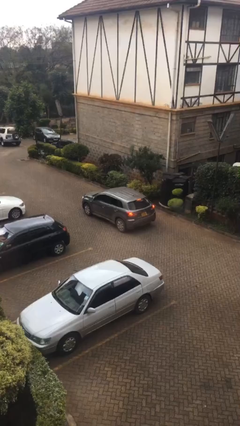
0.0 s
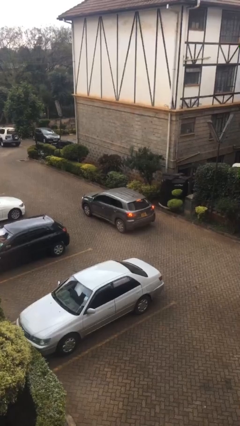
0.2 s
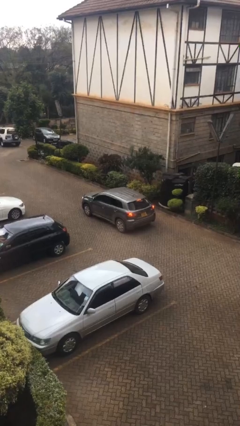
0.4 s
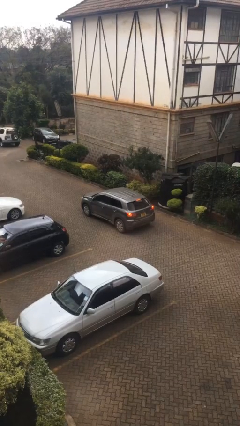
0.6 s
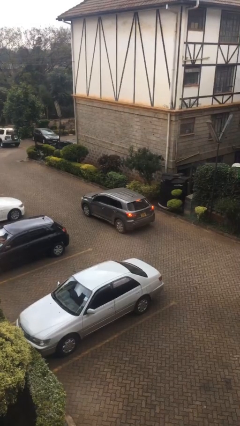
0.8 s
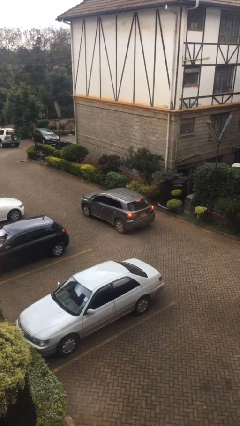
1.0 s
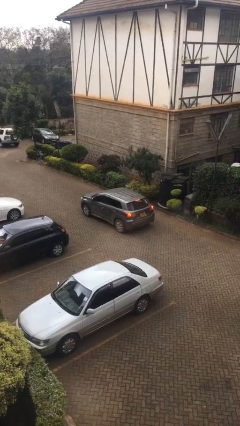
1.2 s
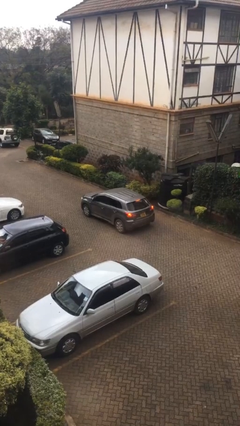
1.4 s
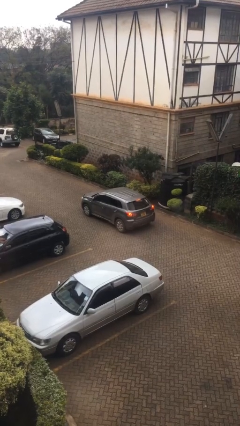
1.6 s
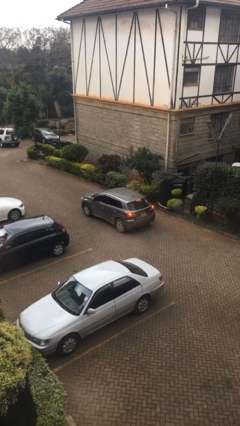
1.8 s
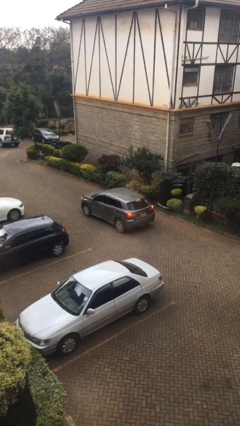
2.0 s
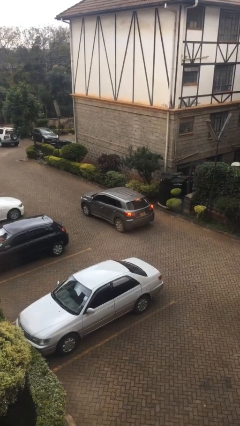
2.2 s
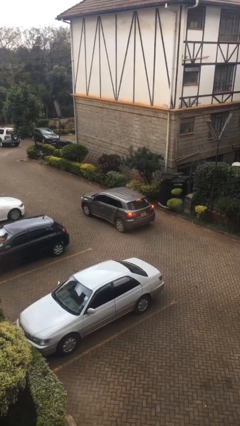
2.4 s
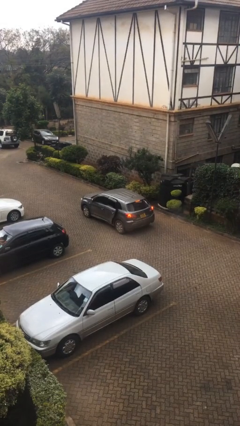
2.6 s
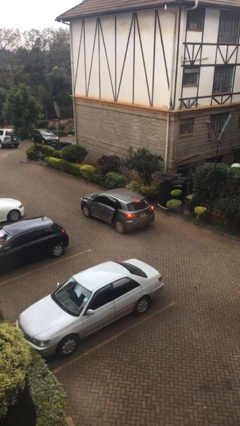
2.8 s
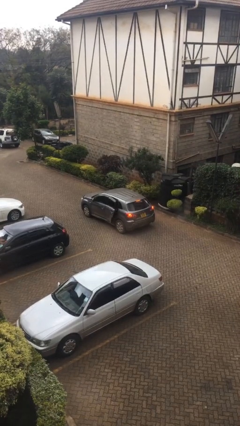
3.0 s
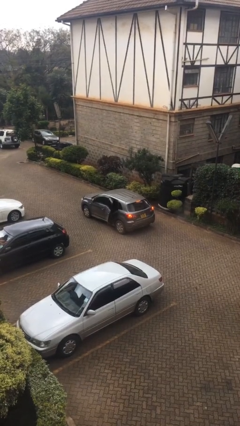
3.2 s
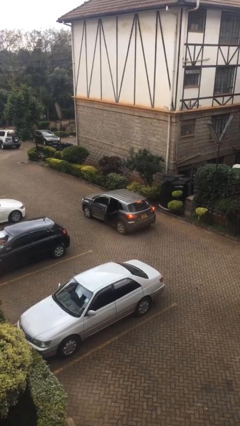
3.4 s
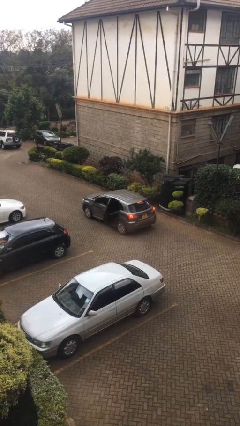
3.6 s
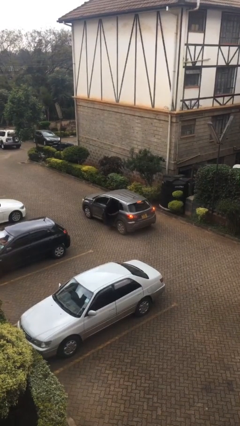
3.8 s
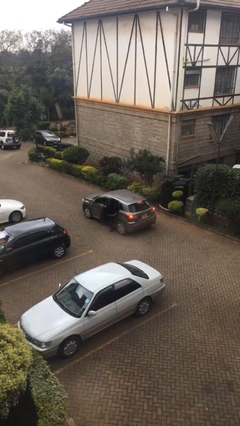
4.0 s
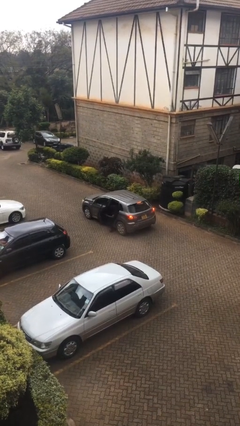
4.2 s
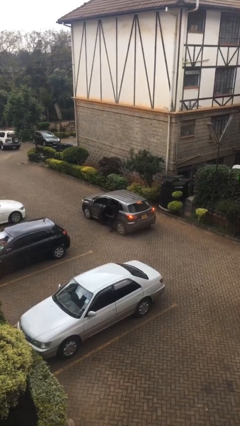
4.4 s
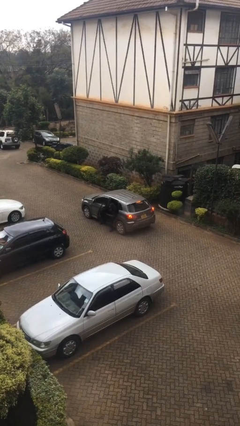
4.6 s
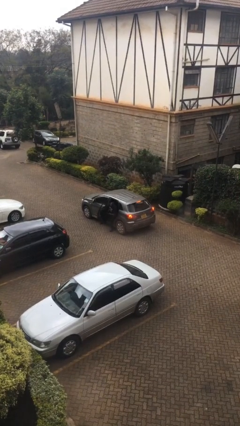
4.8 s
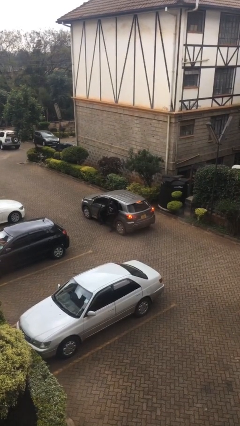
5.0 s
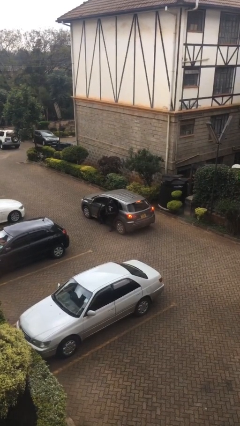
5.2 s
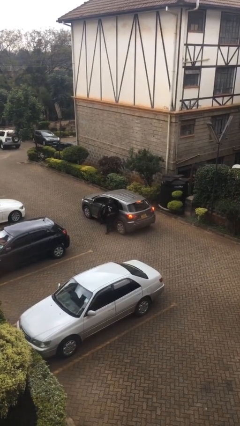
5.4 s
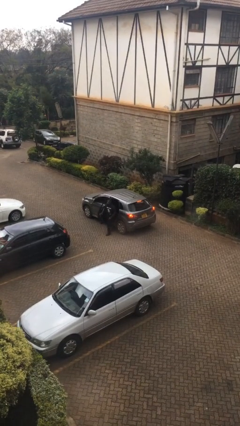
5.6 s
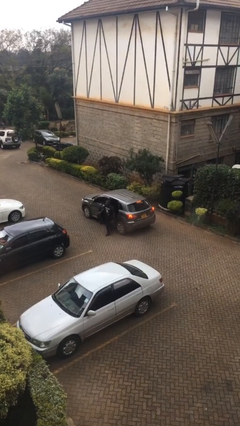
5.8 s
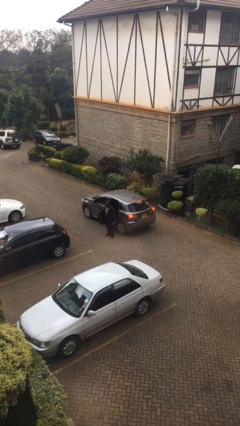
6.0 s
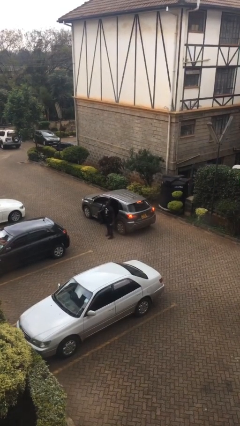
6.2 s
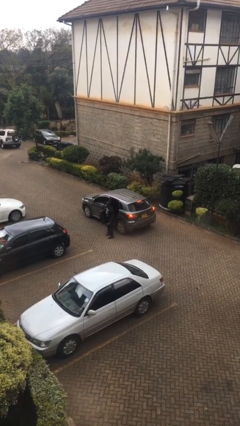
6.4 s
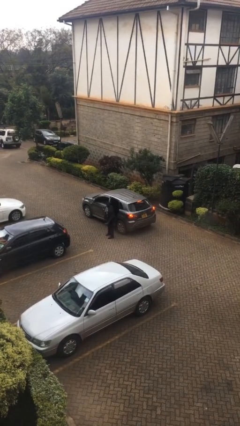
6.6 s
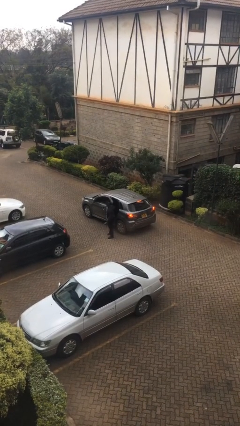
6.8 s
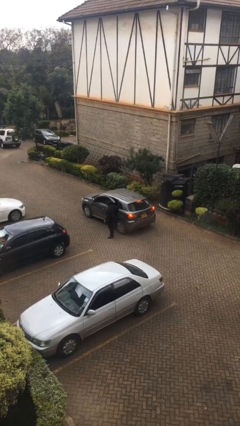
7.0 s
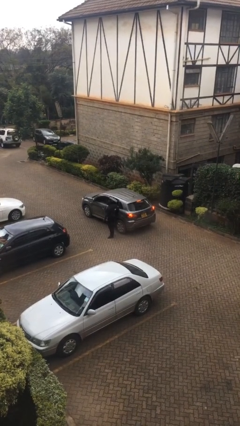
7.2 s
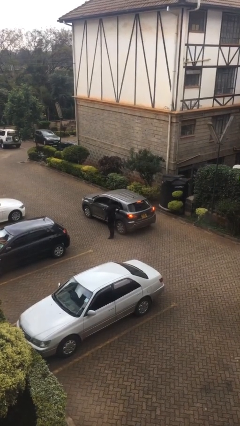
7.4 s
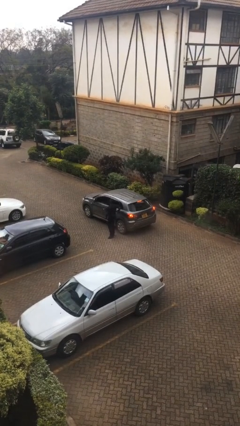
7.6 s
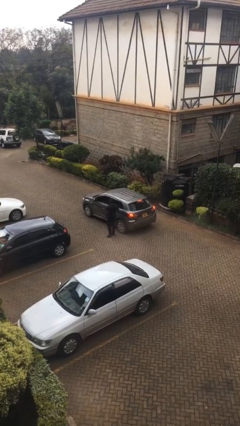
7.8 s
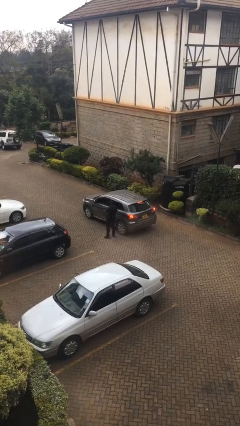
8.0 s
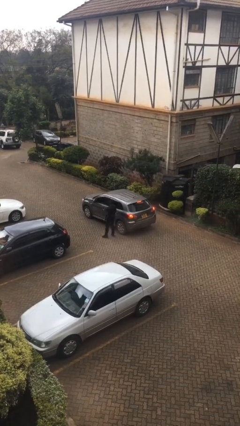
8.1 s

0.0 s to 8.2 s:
car drops off person

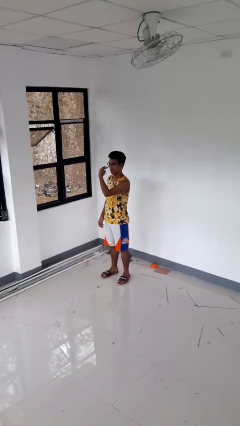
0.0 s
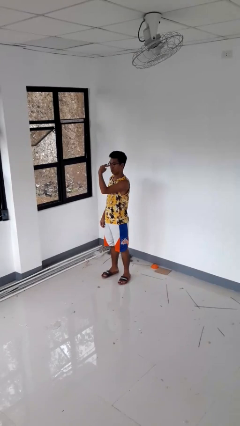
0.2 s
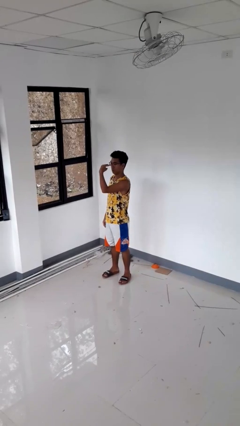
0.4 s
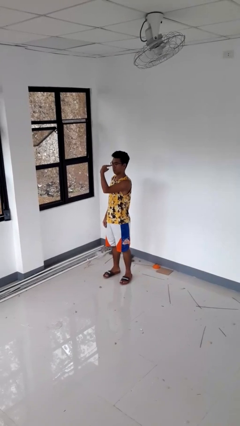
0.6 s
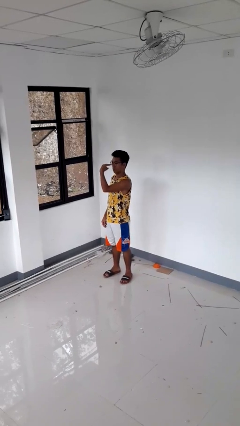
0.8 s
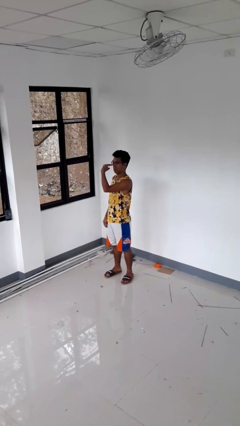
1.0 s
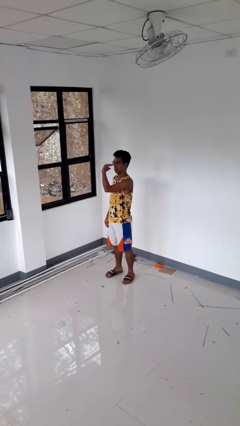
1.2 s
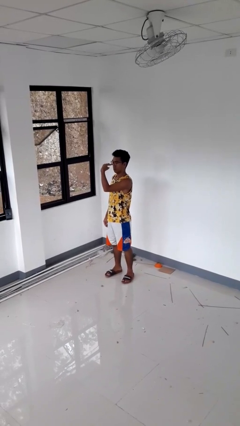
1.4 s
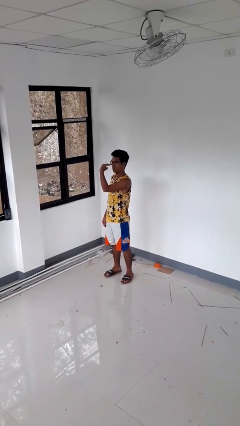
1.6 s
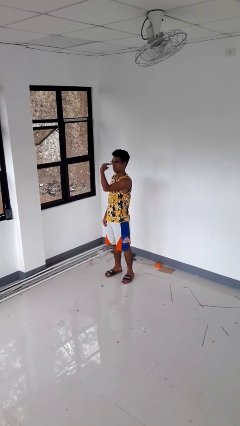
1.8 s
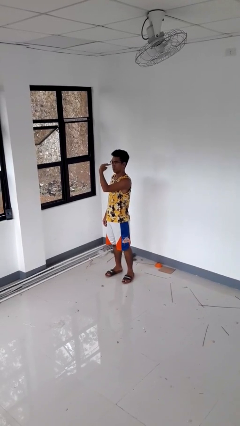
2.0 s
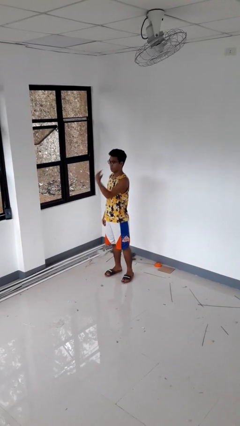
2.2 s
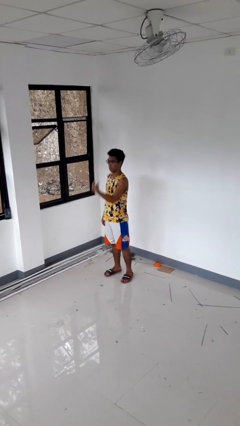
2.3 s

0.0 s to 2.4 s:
person gestures watch closely

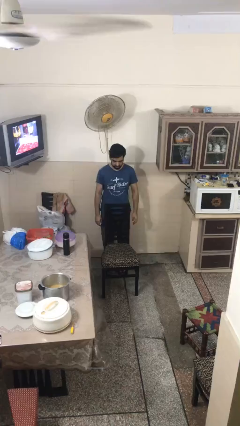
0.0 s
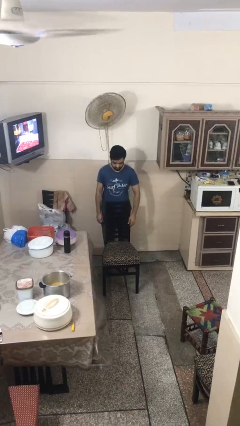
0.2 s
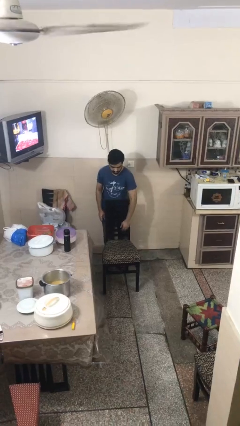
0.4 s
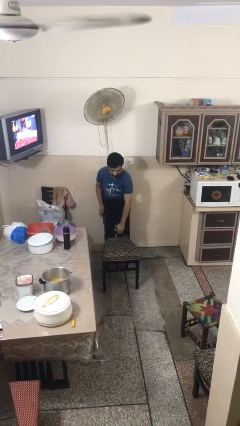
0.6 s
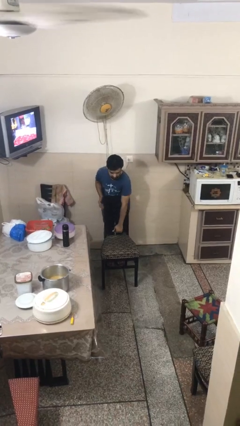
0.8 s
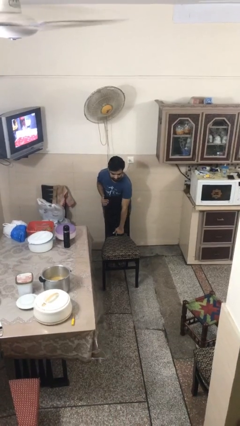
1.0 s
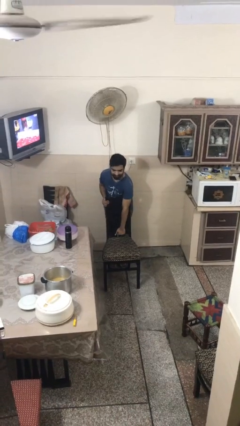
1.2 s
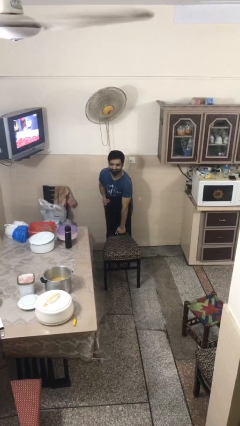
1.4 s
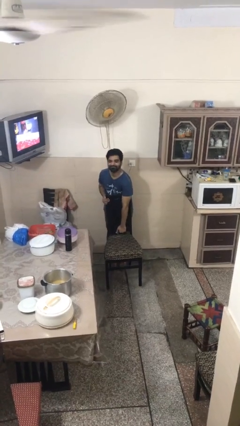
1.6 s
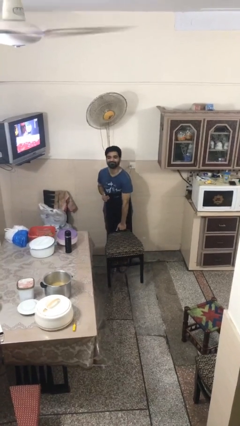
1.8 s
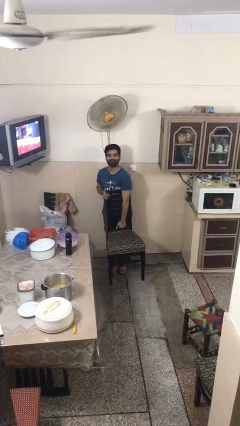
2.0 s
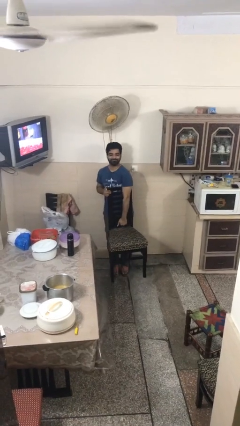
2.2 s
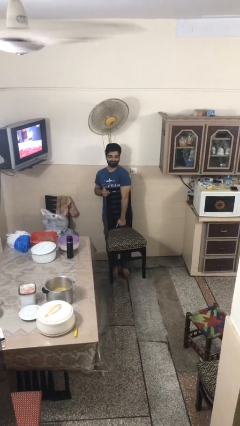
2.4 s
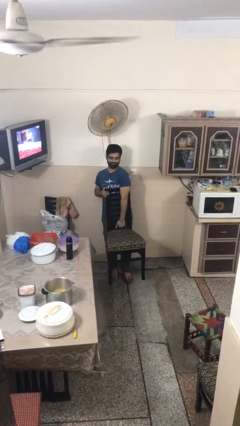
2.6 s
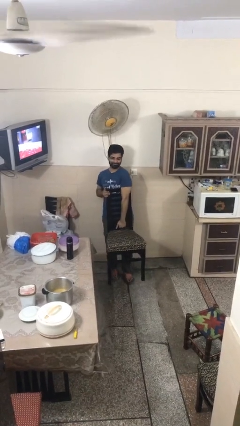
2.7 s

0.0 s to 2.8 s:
person picks up object from floor

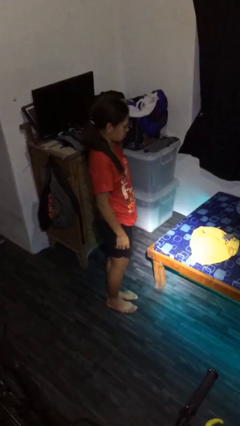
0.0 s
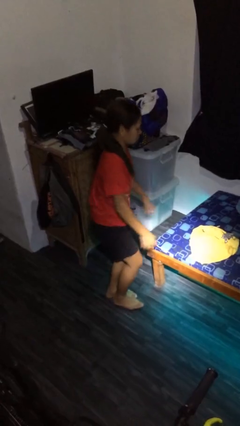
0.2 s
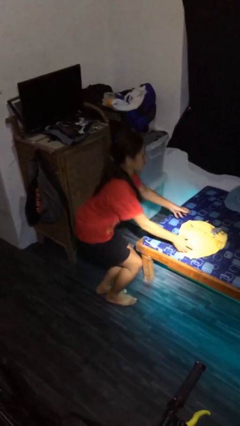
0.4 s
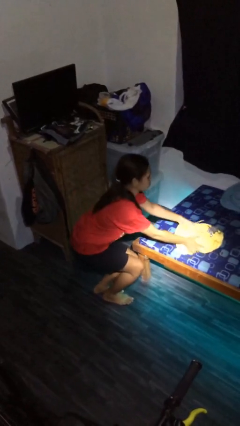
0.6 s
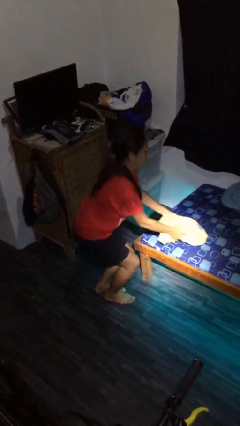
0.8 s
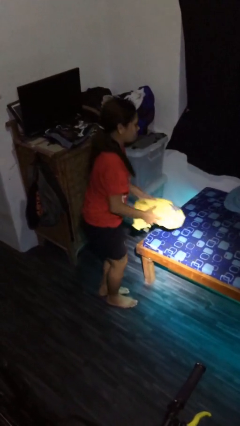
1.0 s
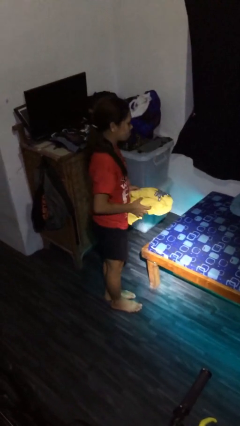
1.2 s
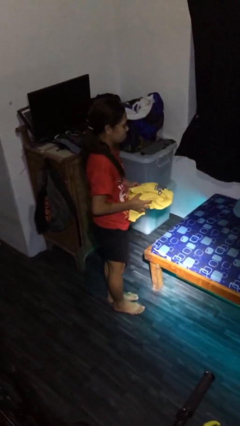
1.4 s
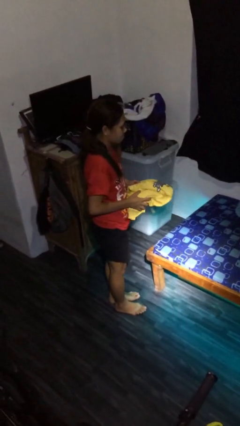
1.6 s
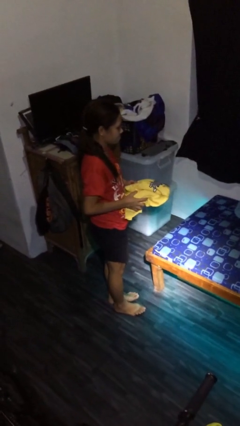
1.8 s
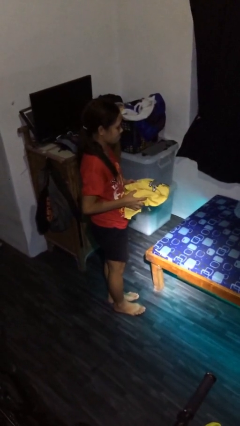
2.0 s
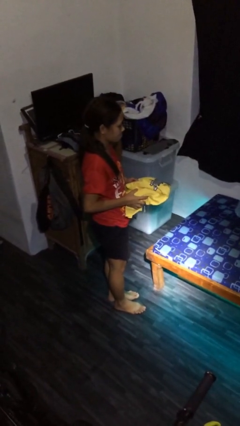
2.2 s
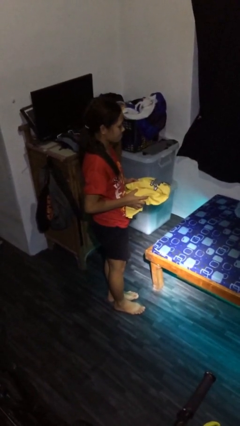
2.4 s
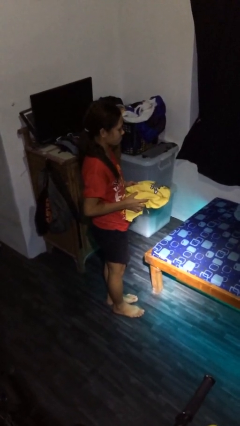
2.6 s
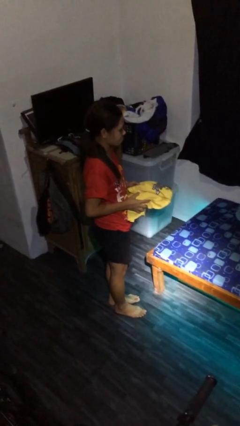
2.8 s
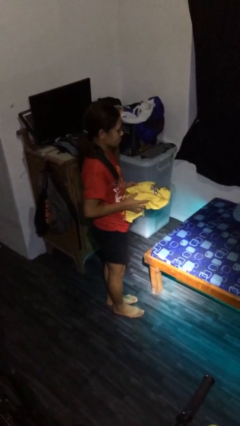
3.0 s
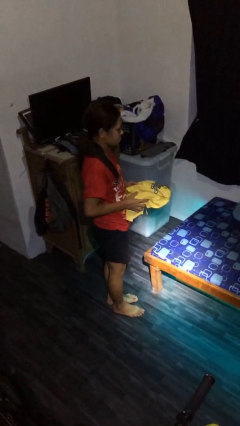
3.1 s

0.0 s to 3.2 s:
person picks up object from bed

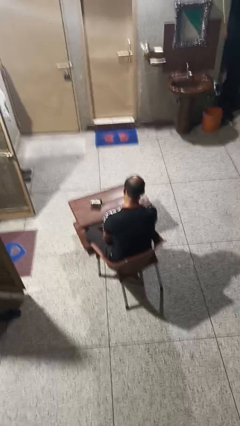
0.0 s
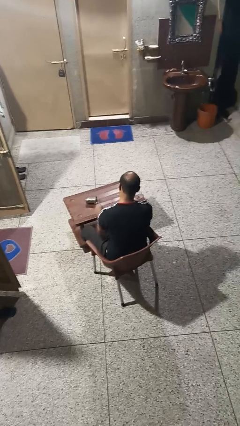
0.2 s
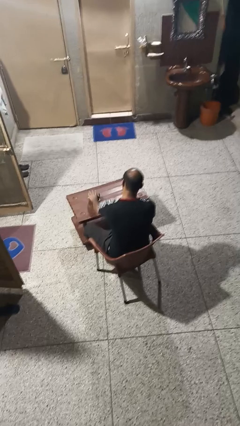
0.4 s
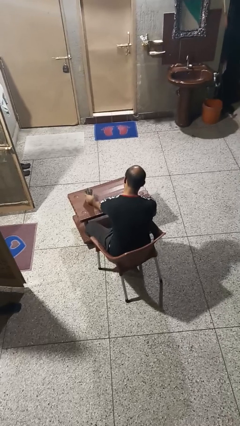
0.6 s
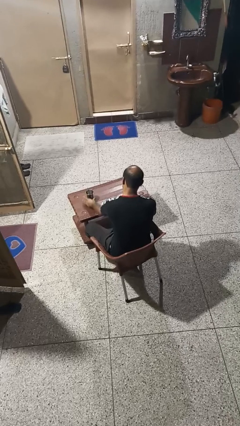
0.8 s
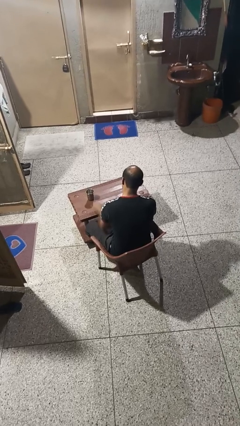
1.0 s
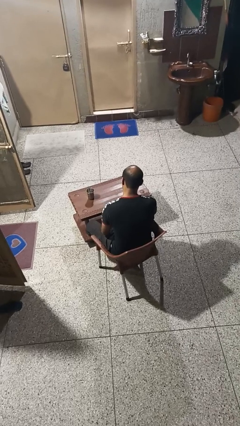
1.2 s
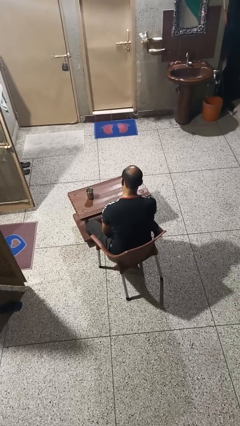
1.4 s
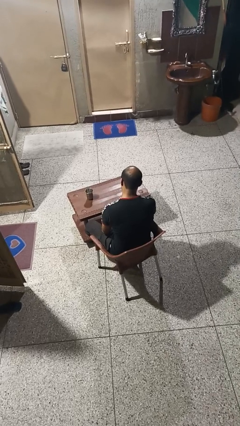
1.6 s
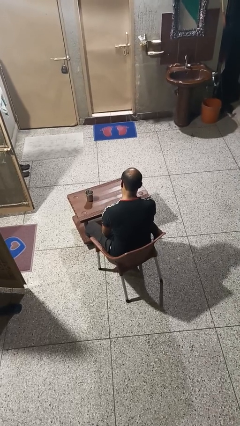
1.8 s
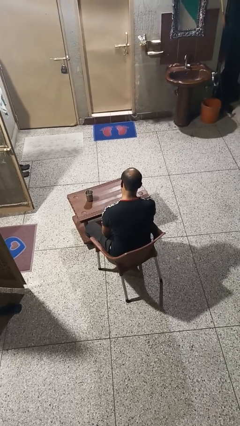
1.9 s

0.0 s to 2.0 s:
person sets upright glass
